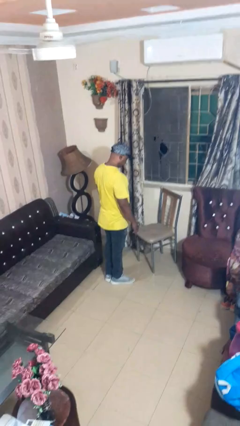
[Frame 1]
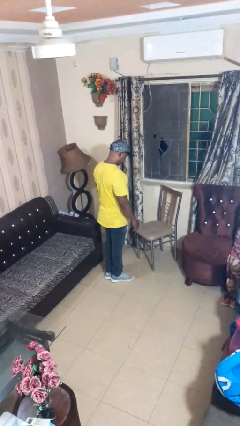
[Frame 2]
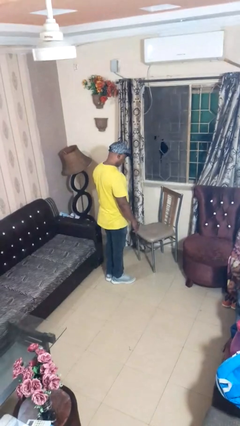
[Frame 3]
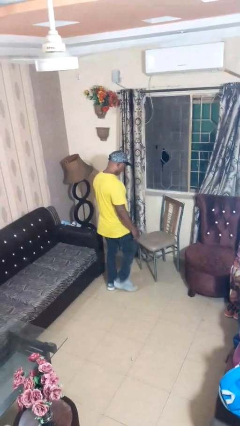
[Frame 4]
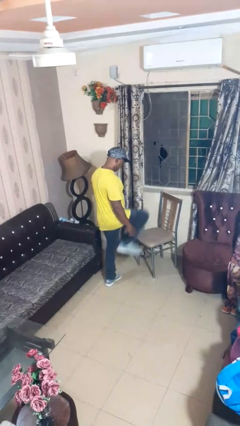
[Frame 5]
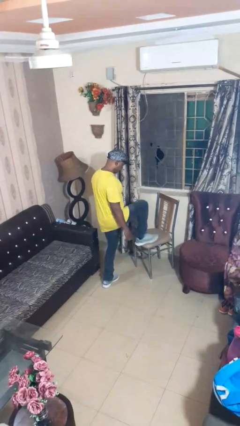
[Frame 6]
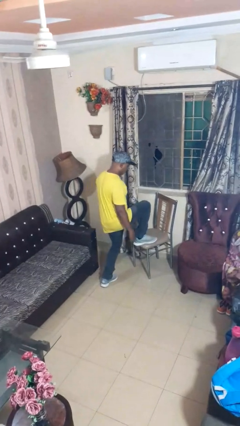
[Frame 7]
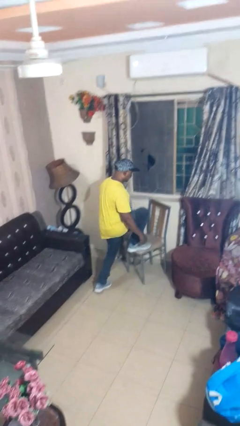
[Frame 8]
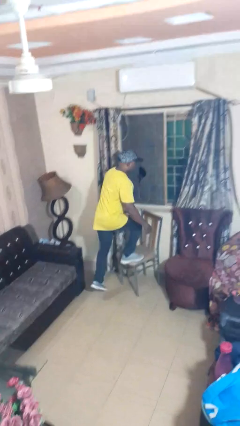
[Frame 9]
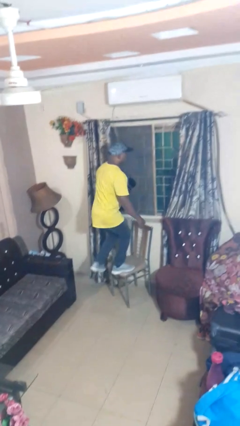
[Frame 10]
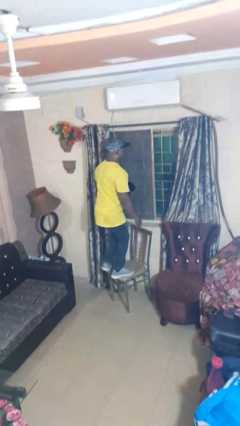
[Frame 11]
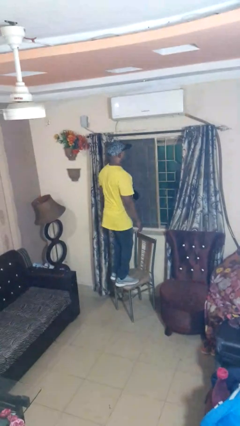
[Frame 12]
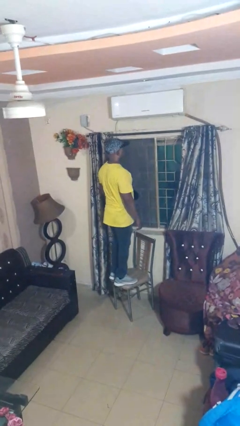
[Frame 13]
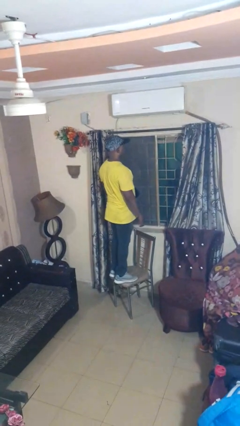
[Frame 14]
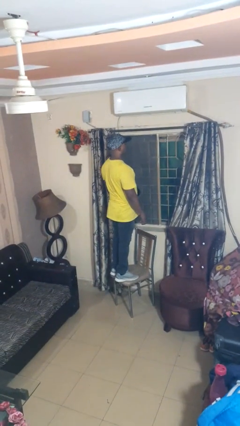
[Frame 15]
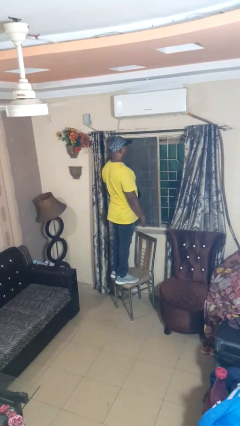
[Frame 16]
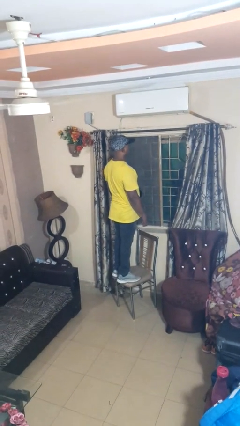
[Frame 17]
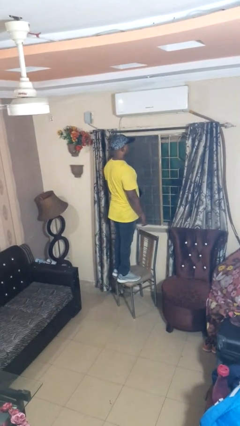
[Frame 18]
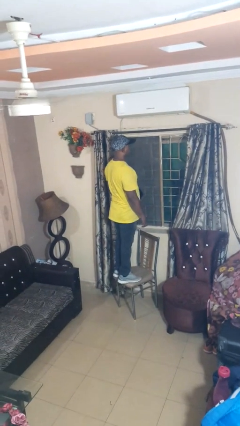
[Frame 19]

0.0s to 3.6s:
person climbs on chair

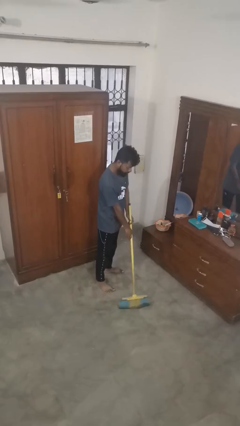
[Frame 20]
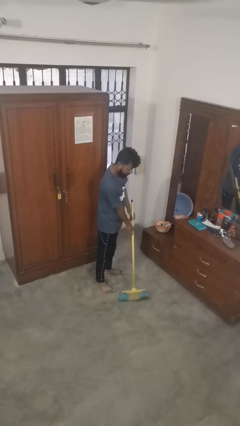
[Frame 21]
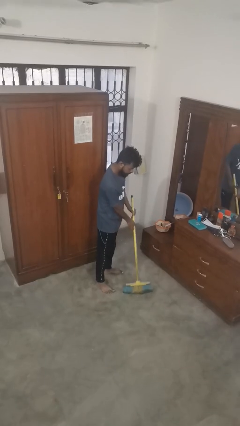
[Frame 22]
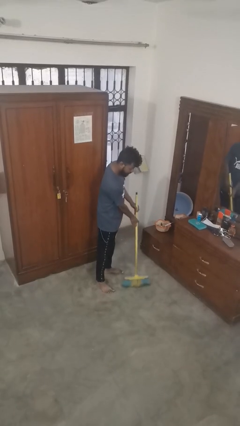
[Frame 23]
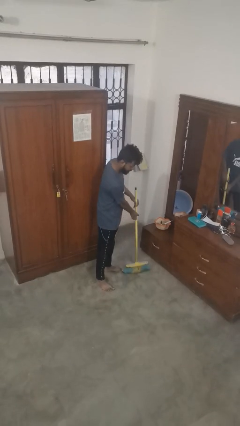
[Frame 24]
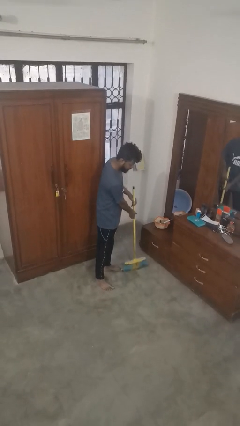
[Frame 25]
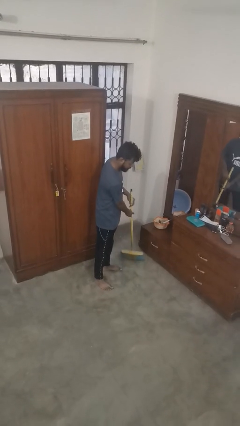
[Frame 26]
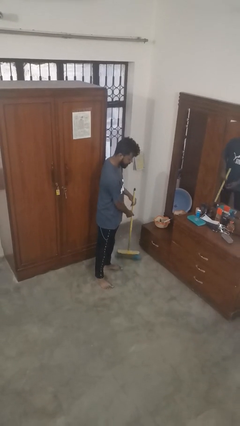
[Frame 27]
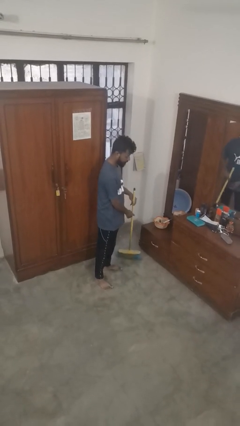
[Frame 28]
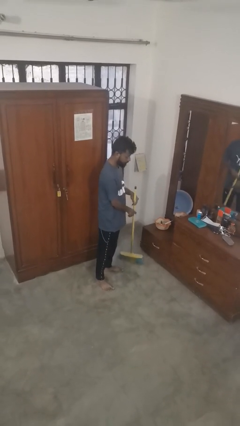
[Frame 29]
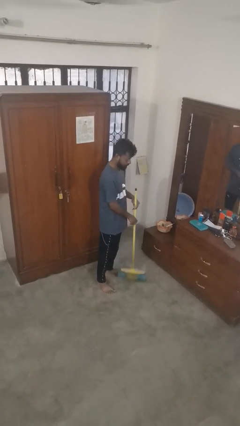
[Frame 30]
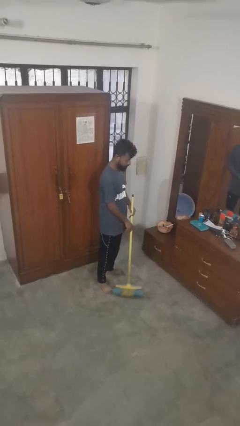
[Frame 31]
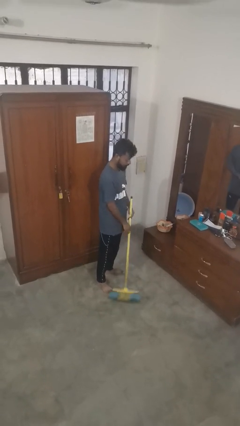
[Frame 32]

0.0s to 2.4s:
person sweeps floor

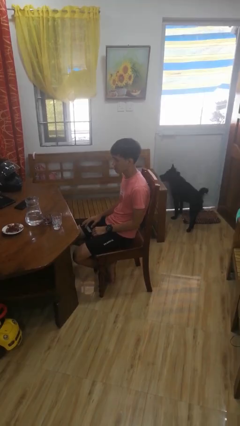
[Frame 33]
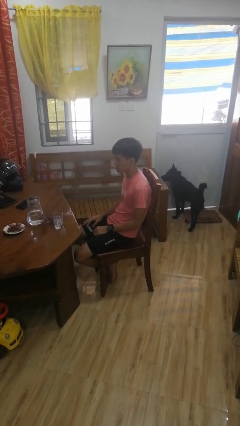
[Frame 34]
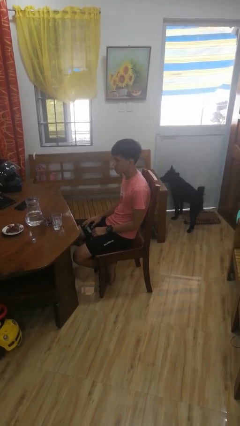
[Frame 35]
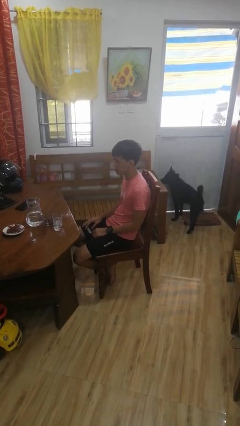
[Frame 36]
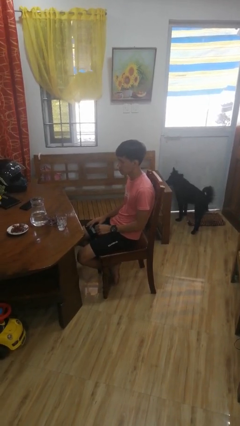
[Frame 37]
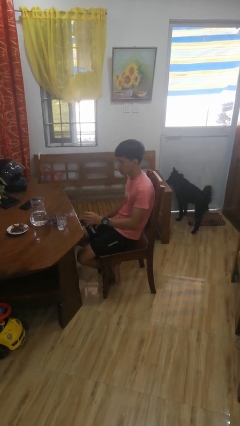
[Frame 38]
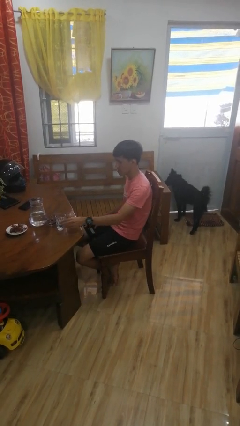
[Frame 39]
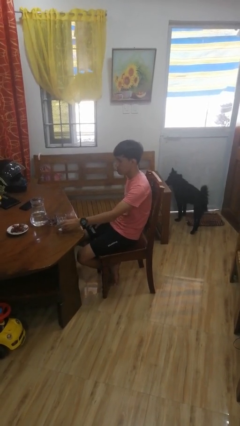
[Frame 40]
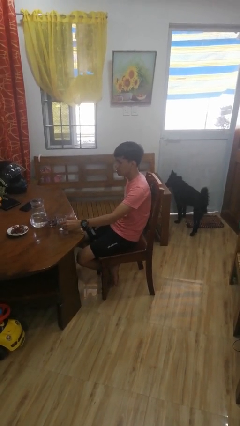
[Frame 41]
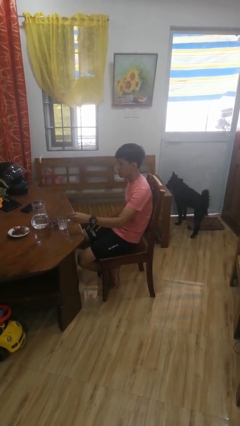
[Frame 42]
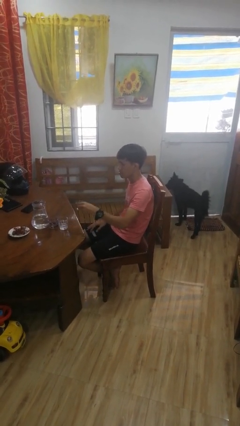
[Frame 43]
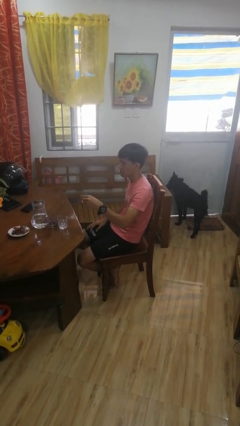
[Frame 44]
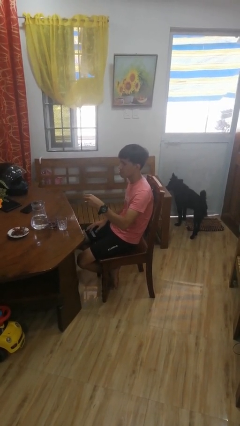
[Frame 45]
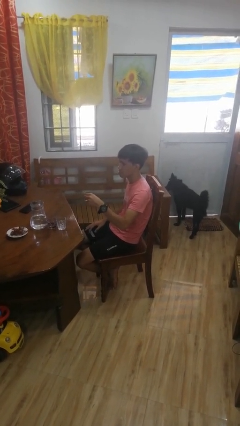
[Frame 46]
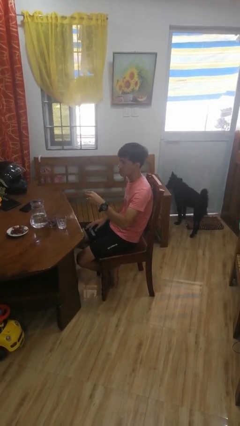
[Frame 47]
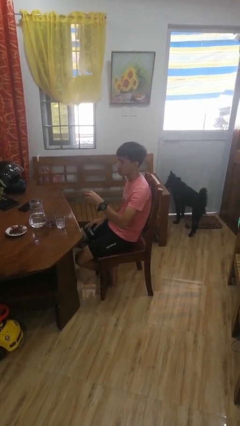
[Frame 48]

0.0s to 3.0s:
person picks up object from table

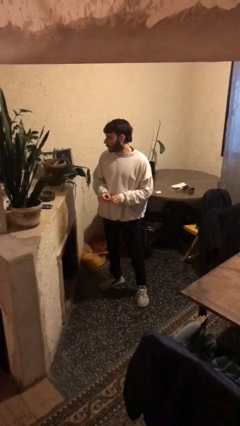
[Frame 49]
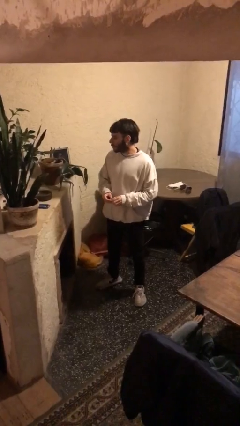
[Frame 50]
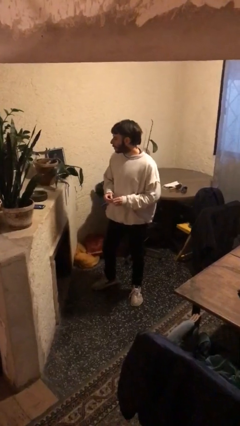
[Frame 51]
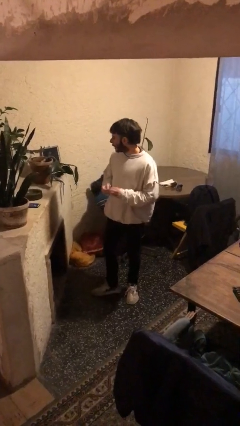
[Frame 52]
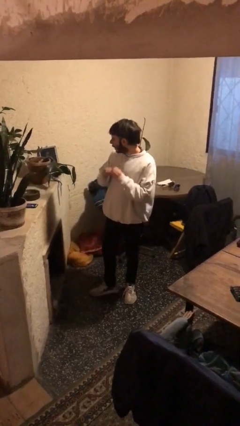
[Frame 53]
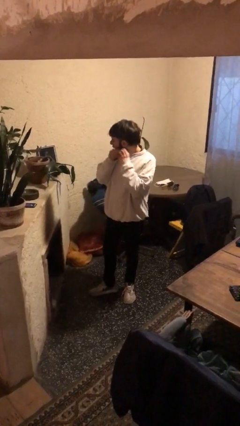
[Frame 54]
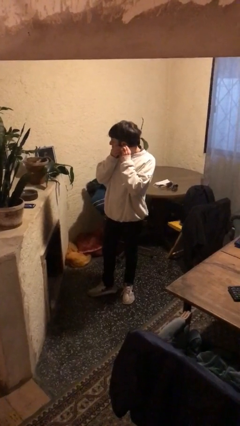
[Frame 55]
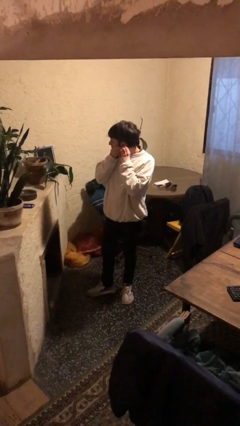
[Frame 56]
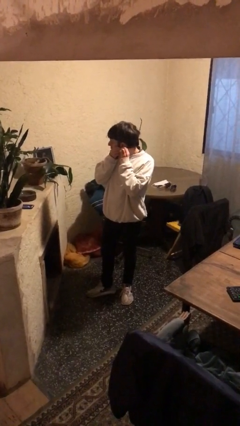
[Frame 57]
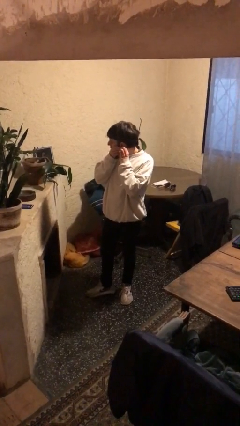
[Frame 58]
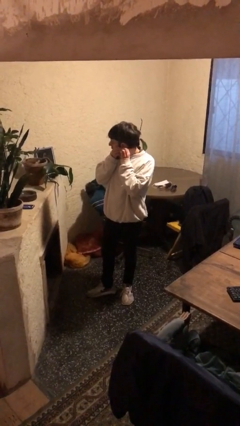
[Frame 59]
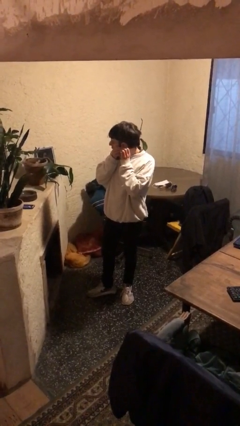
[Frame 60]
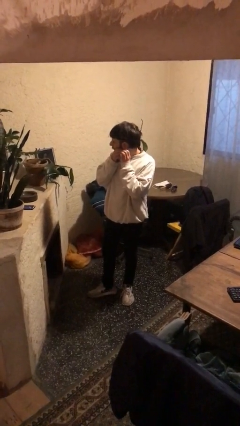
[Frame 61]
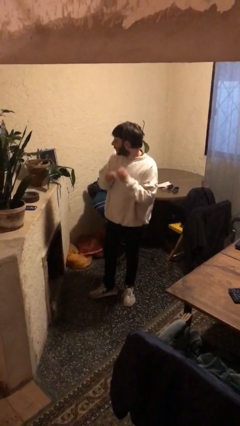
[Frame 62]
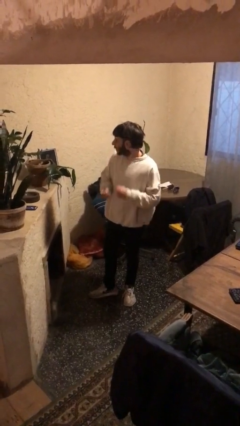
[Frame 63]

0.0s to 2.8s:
person puts on earrings

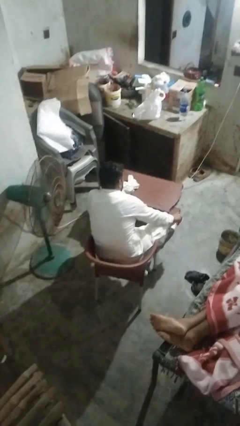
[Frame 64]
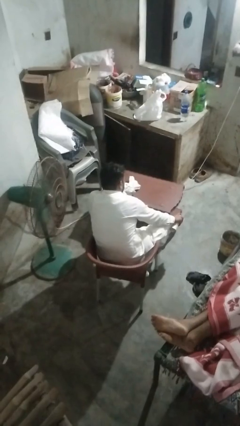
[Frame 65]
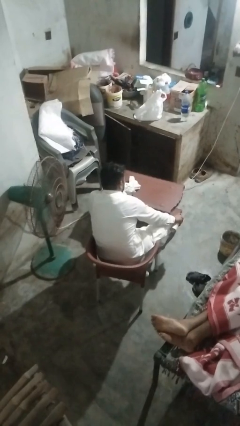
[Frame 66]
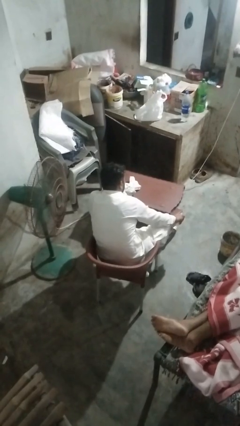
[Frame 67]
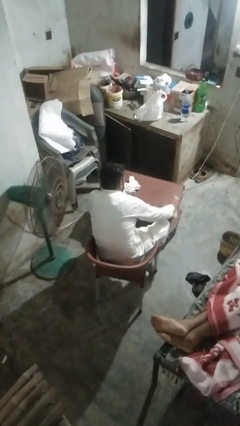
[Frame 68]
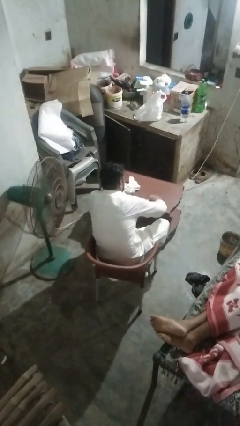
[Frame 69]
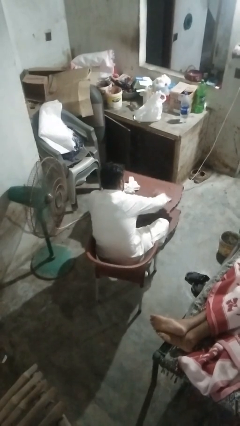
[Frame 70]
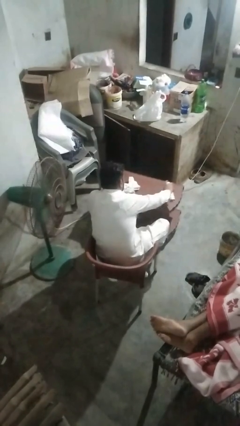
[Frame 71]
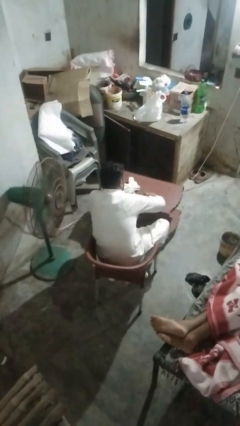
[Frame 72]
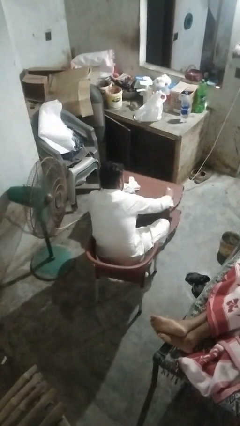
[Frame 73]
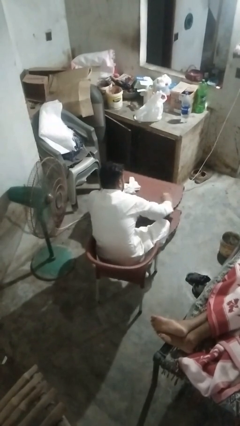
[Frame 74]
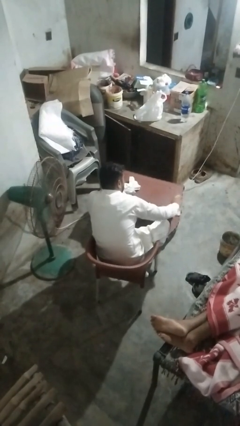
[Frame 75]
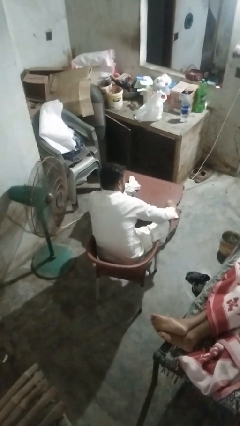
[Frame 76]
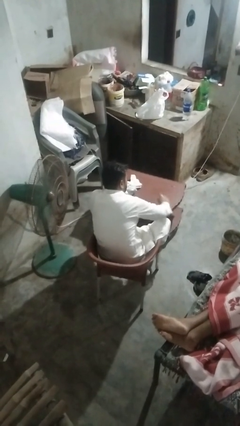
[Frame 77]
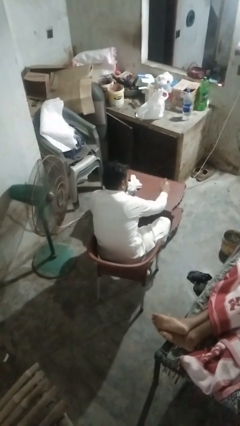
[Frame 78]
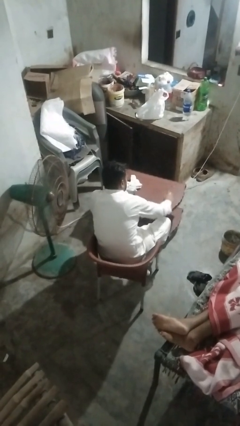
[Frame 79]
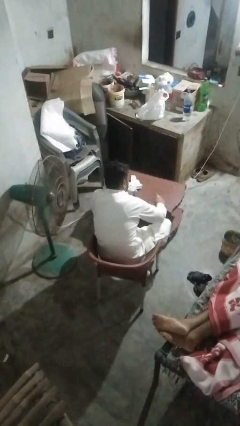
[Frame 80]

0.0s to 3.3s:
person sprays from bottle

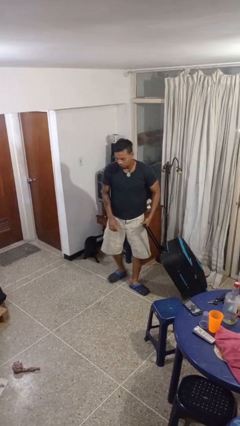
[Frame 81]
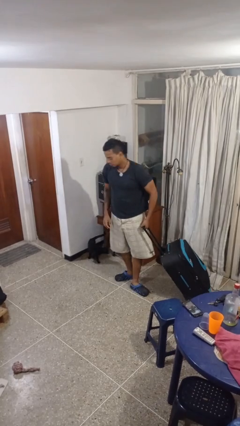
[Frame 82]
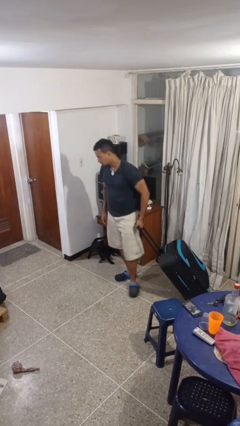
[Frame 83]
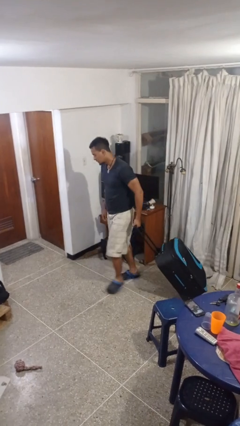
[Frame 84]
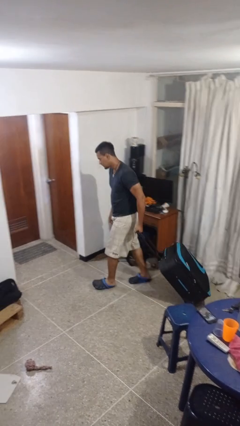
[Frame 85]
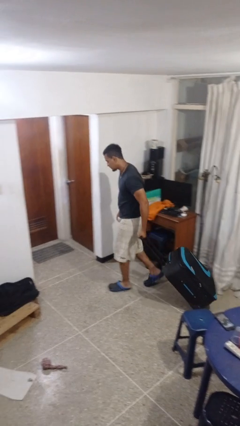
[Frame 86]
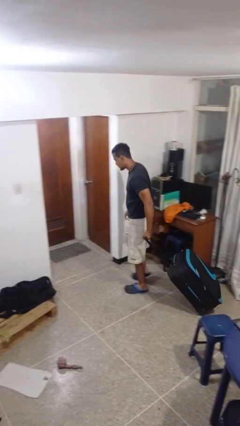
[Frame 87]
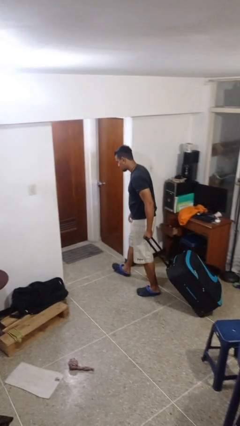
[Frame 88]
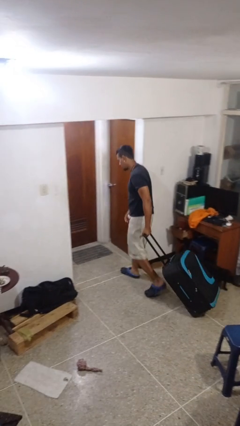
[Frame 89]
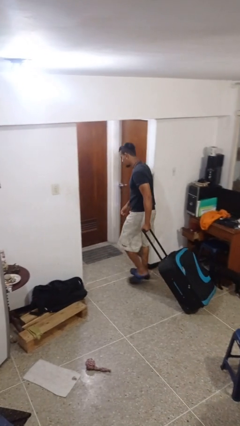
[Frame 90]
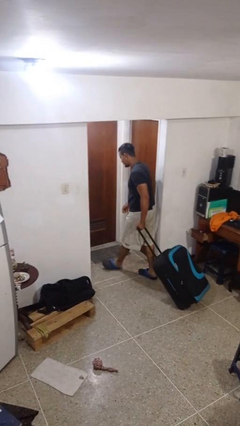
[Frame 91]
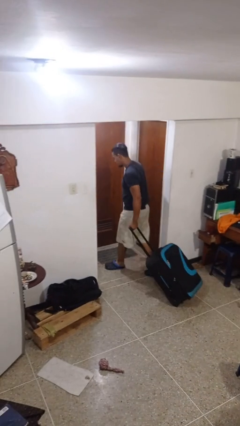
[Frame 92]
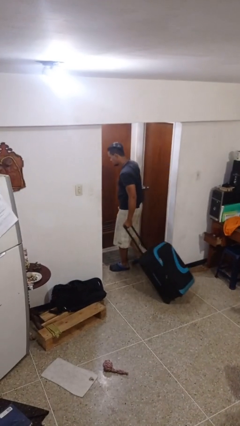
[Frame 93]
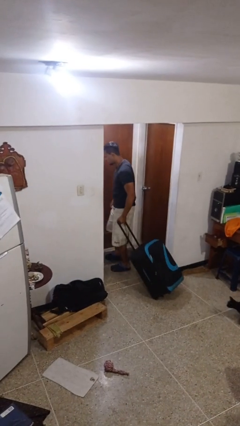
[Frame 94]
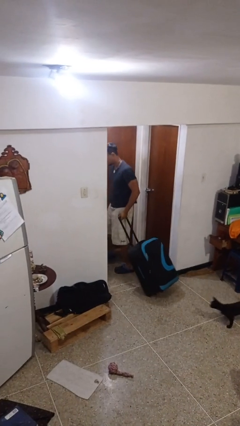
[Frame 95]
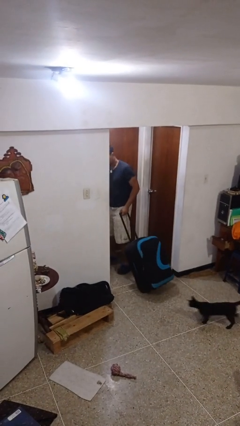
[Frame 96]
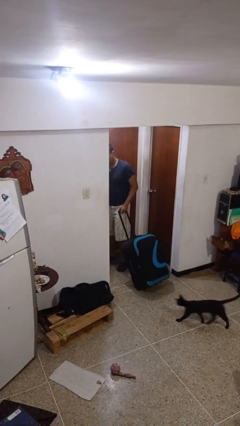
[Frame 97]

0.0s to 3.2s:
person pulls wheeled cart
